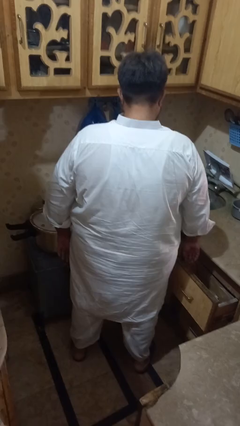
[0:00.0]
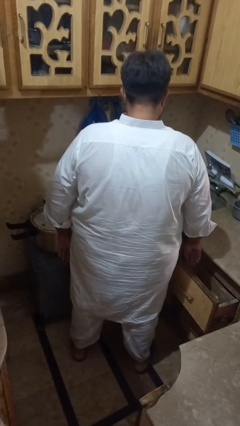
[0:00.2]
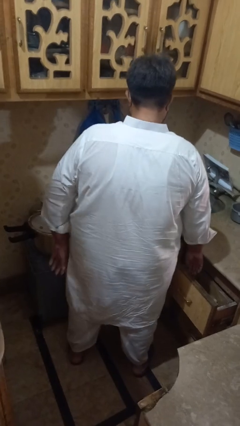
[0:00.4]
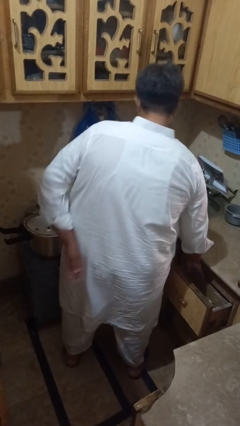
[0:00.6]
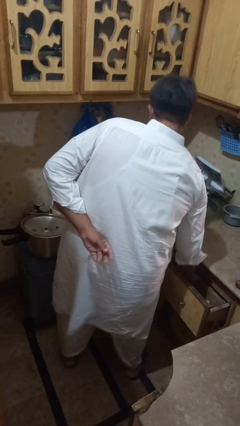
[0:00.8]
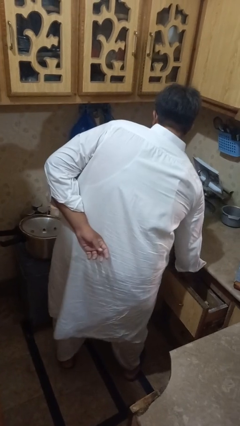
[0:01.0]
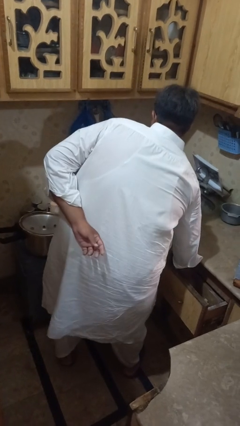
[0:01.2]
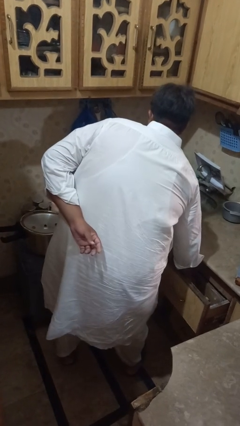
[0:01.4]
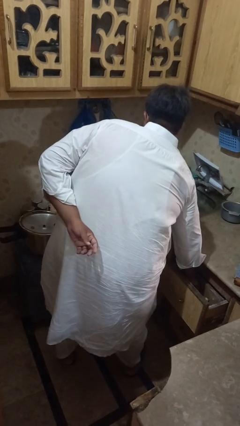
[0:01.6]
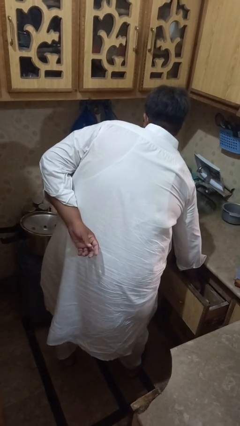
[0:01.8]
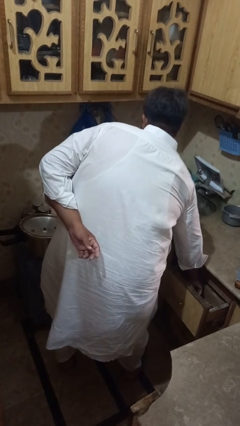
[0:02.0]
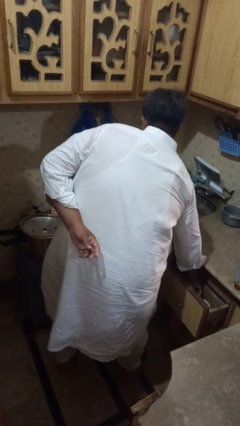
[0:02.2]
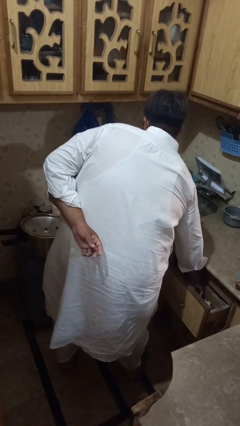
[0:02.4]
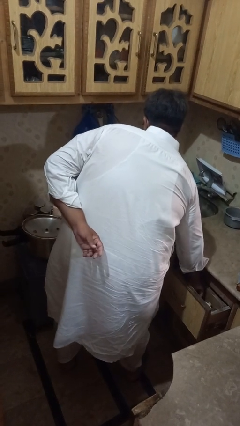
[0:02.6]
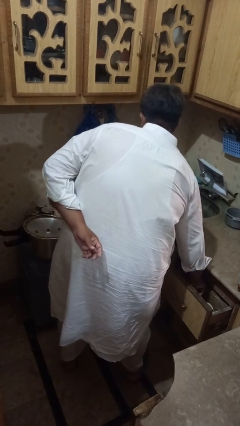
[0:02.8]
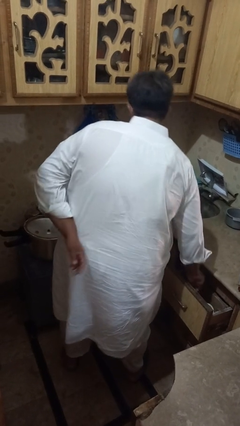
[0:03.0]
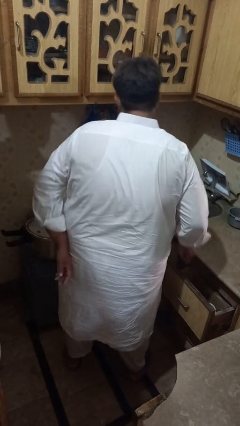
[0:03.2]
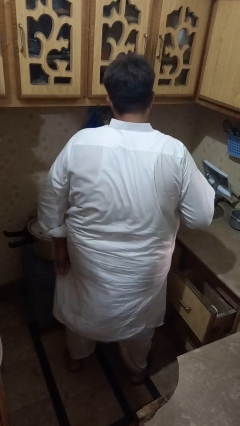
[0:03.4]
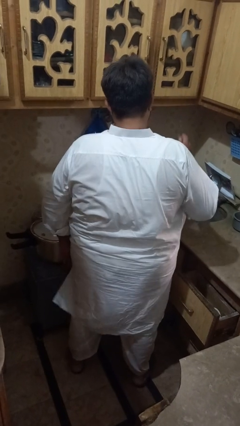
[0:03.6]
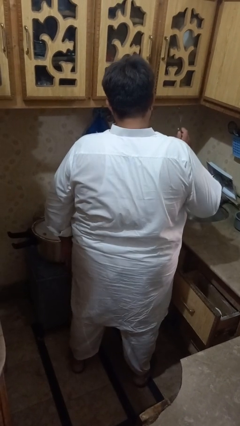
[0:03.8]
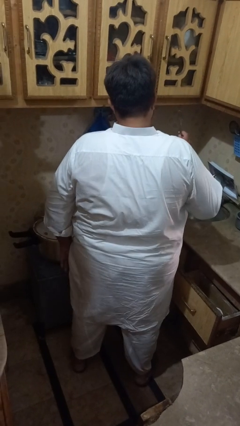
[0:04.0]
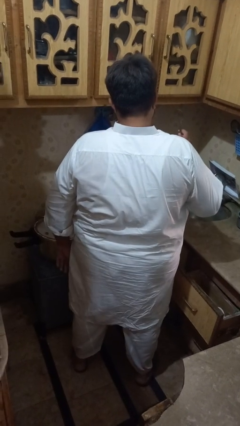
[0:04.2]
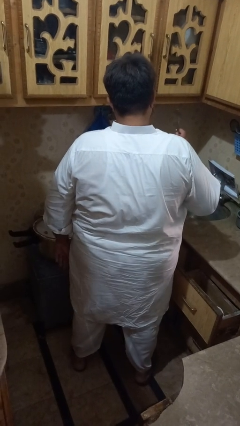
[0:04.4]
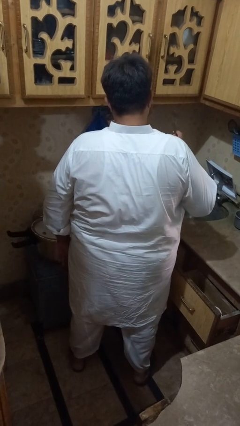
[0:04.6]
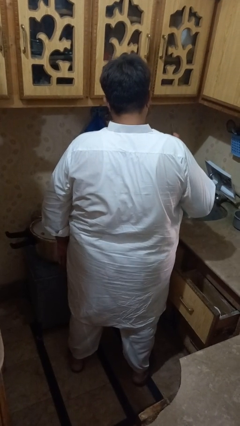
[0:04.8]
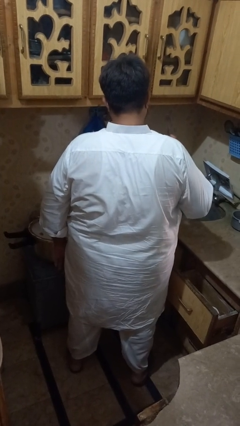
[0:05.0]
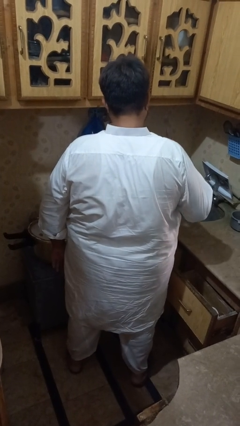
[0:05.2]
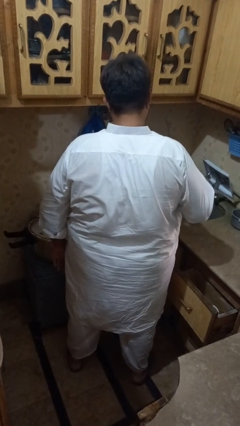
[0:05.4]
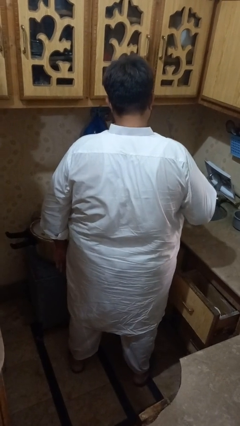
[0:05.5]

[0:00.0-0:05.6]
person takes object from kitchen drawer

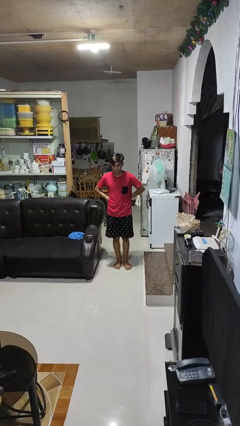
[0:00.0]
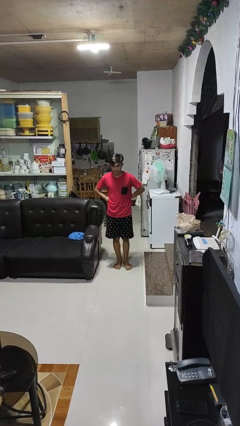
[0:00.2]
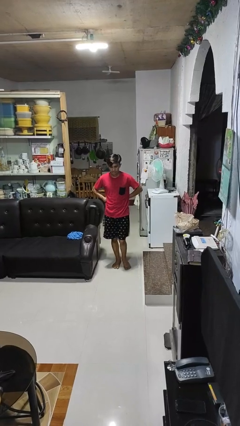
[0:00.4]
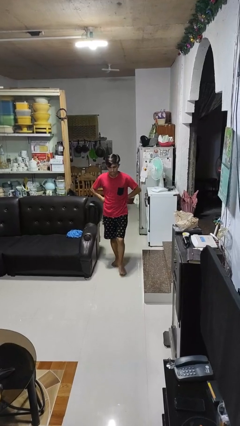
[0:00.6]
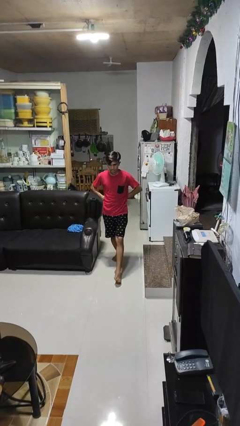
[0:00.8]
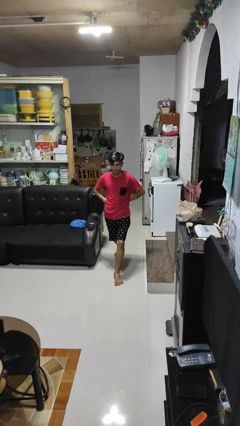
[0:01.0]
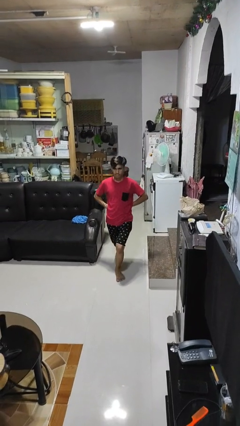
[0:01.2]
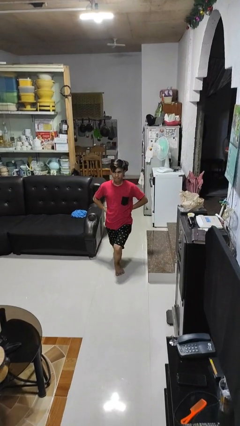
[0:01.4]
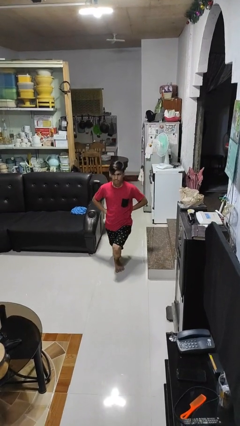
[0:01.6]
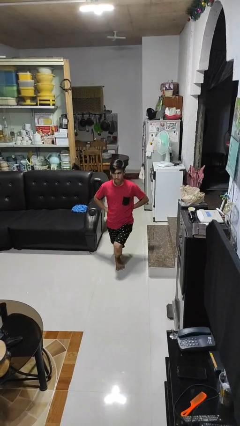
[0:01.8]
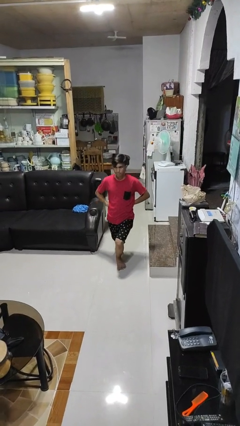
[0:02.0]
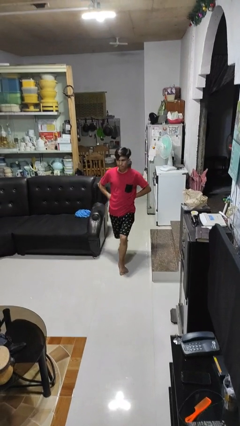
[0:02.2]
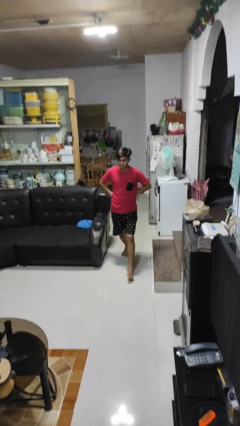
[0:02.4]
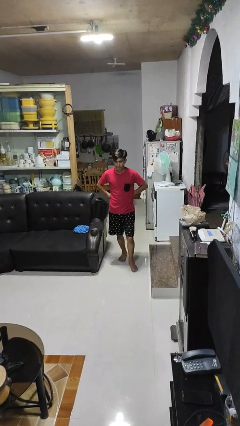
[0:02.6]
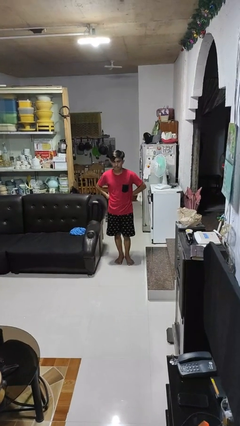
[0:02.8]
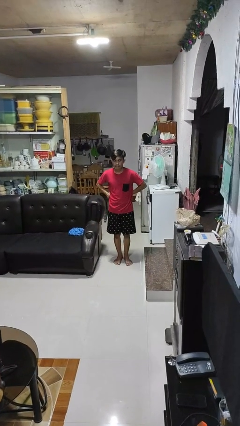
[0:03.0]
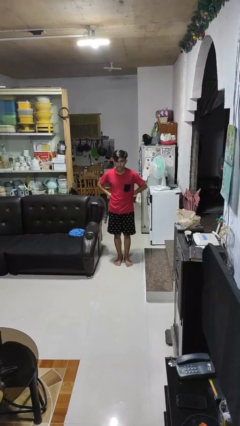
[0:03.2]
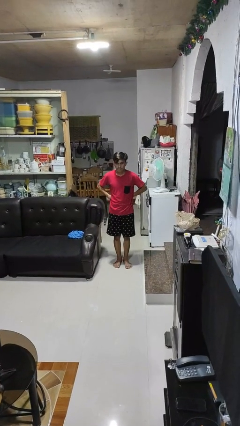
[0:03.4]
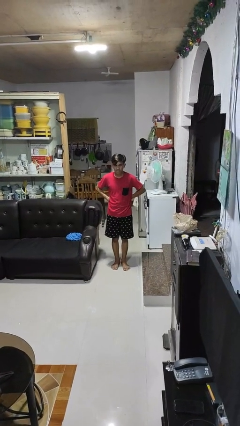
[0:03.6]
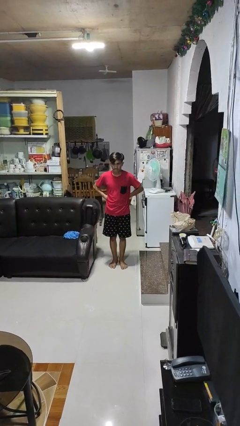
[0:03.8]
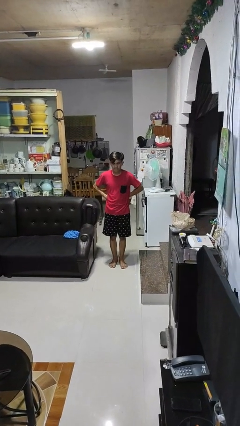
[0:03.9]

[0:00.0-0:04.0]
person exercises with lunges

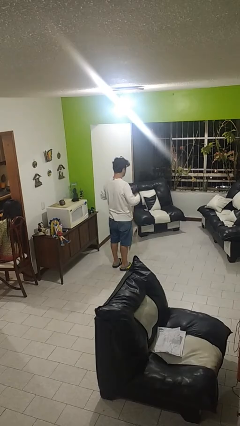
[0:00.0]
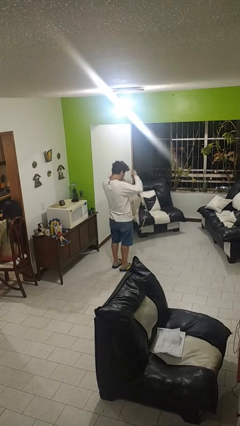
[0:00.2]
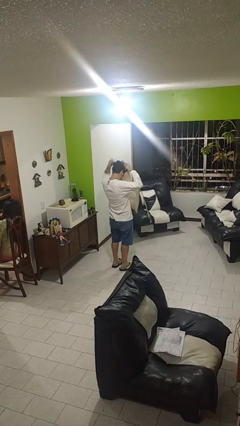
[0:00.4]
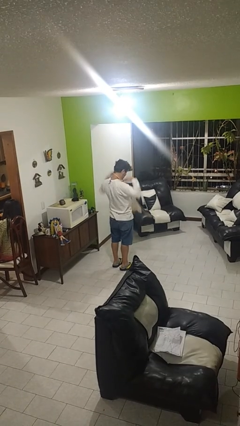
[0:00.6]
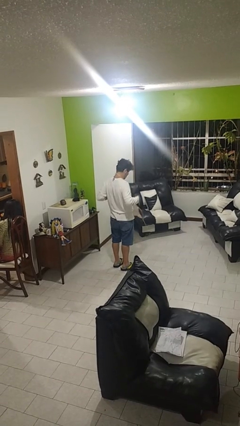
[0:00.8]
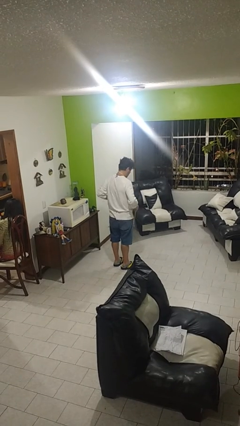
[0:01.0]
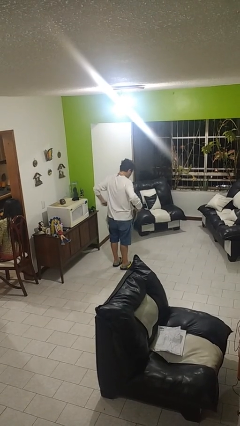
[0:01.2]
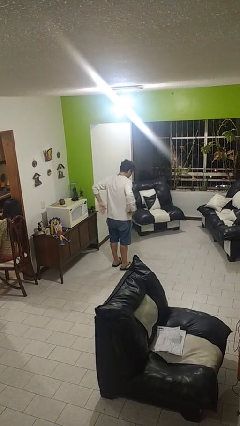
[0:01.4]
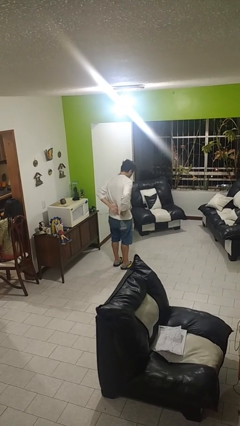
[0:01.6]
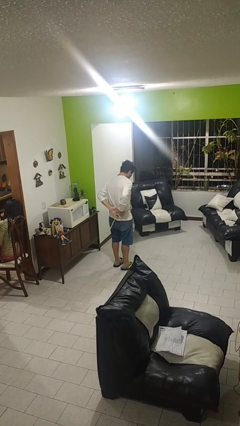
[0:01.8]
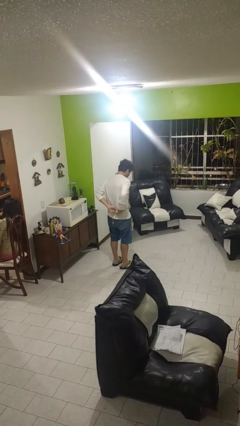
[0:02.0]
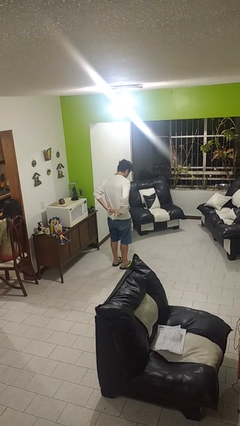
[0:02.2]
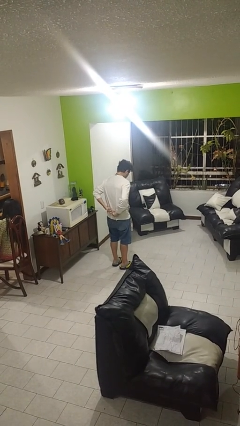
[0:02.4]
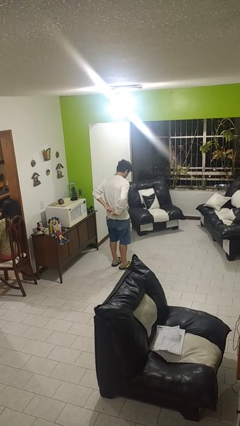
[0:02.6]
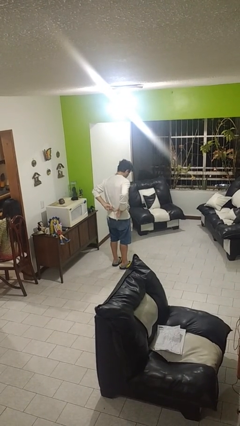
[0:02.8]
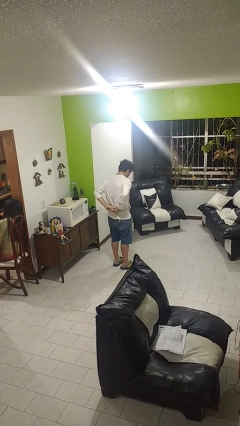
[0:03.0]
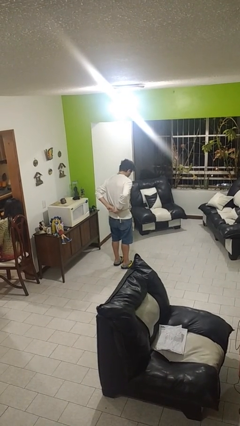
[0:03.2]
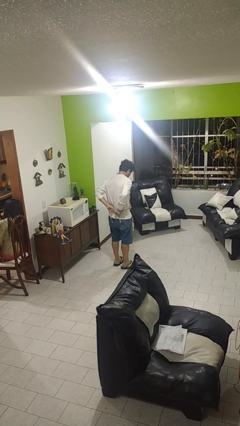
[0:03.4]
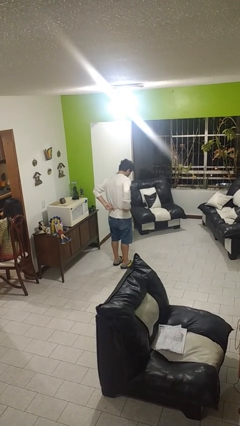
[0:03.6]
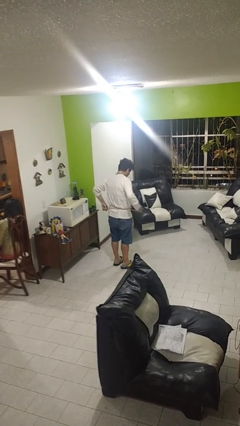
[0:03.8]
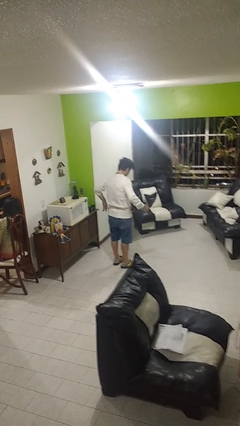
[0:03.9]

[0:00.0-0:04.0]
person puts on apron

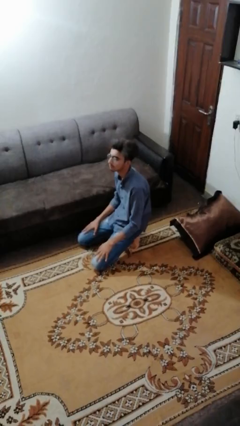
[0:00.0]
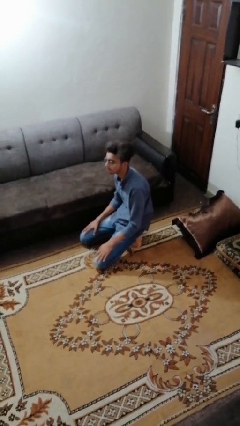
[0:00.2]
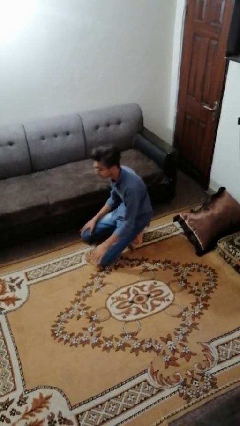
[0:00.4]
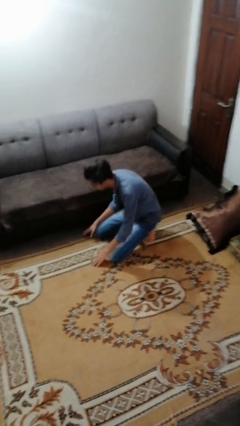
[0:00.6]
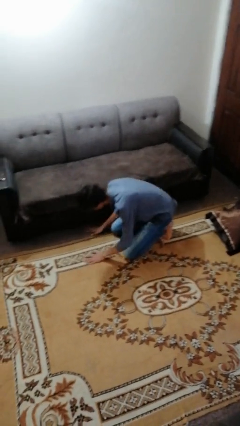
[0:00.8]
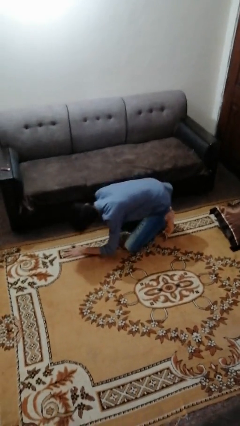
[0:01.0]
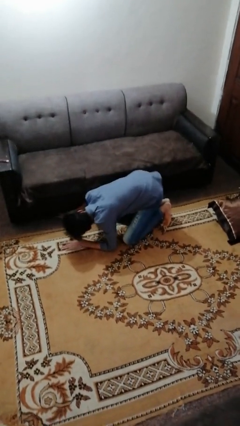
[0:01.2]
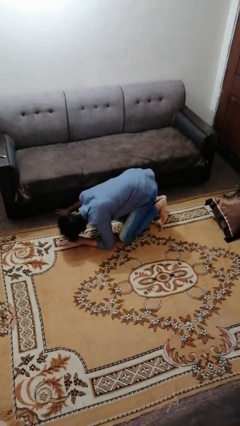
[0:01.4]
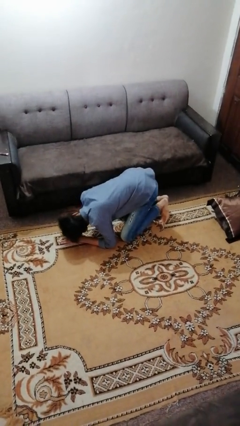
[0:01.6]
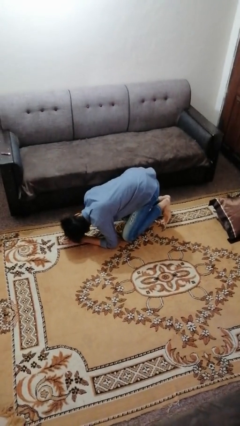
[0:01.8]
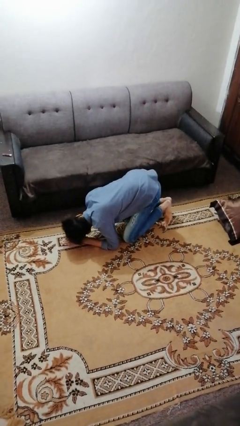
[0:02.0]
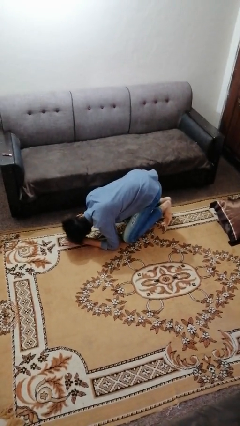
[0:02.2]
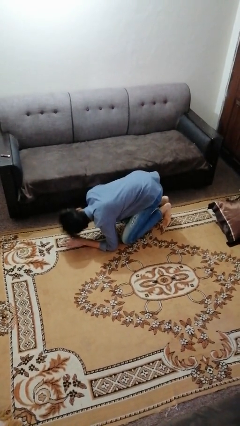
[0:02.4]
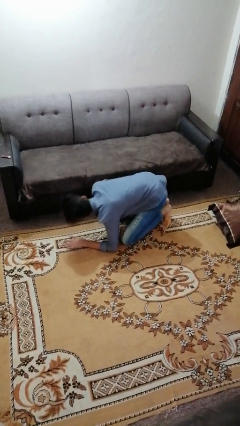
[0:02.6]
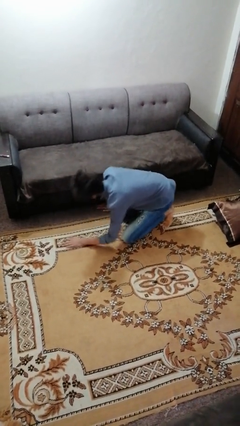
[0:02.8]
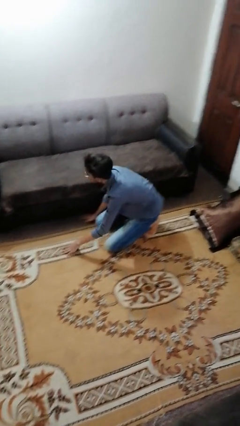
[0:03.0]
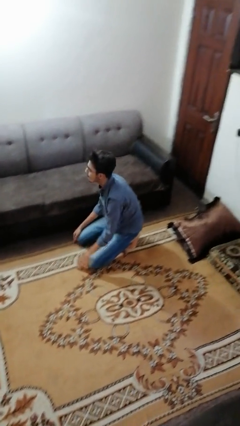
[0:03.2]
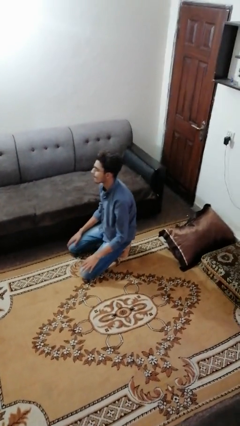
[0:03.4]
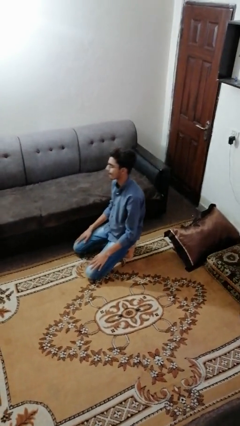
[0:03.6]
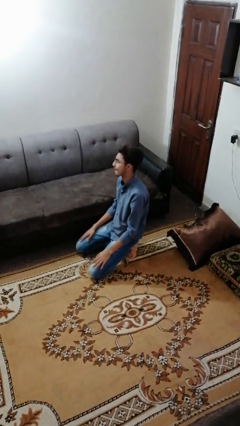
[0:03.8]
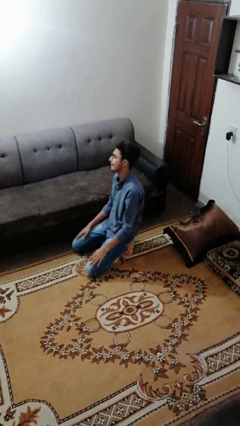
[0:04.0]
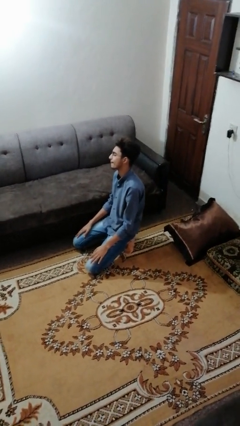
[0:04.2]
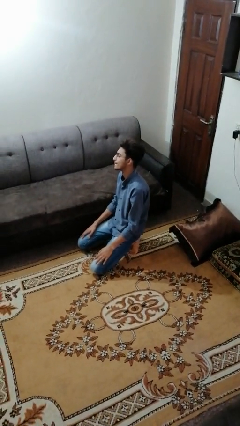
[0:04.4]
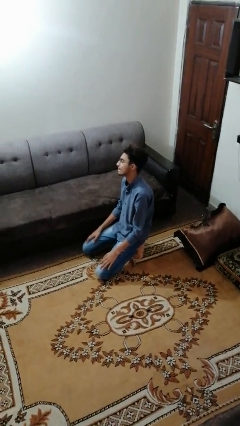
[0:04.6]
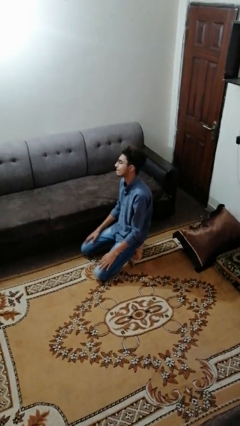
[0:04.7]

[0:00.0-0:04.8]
person searches under couch
